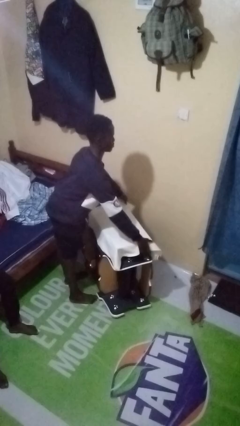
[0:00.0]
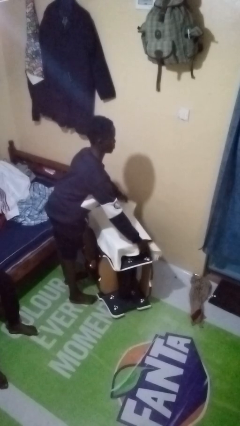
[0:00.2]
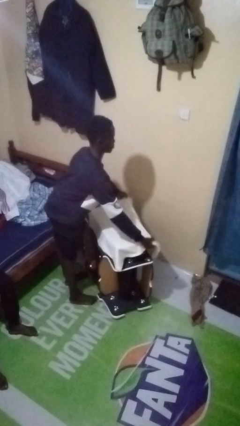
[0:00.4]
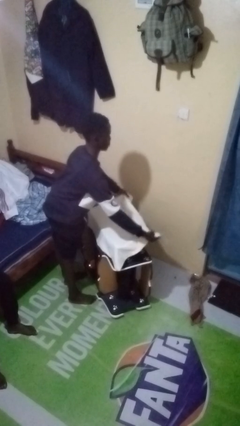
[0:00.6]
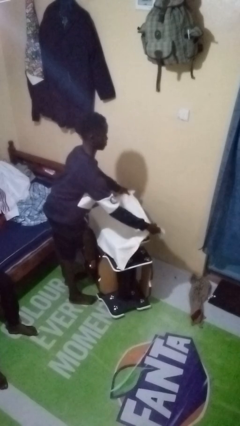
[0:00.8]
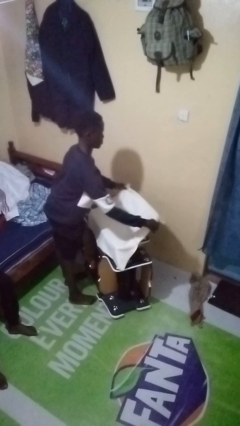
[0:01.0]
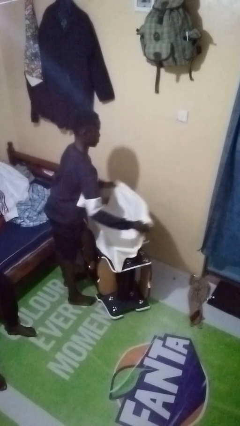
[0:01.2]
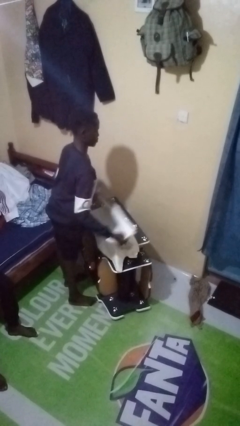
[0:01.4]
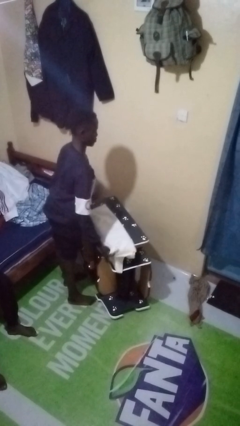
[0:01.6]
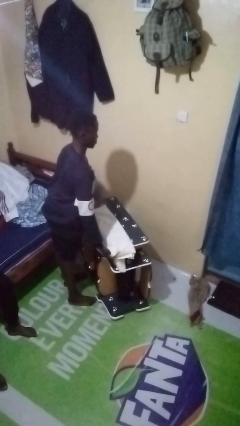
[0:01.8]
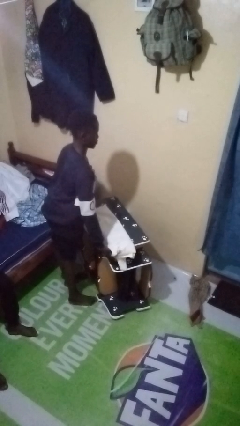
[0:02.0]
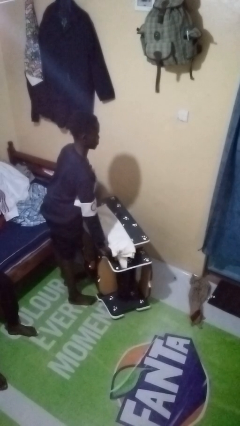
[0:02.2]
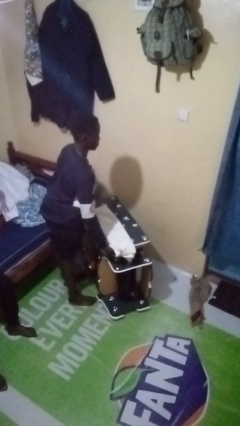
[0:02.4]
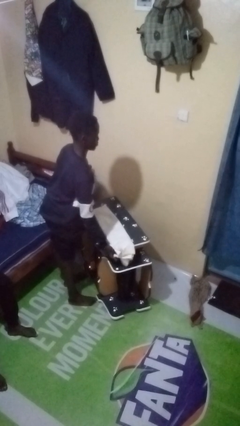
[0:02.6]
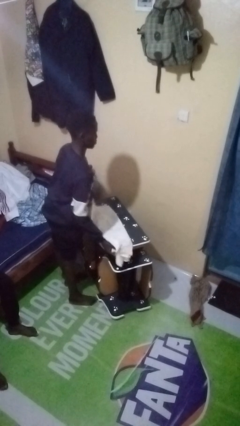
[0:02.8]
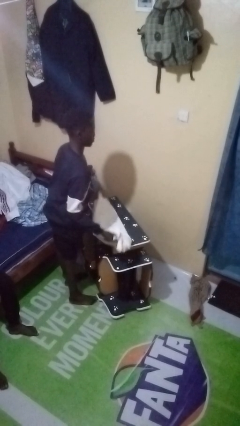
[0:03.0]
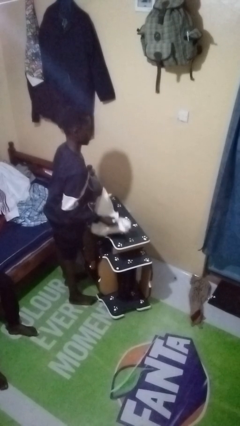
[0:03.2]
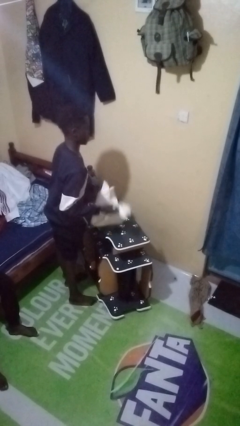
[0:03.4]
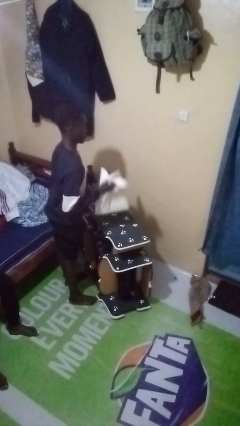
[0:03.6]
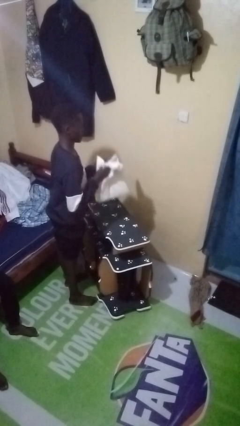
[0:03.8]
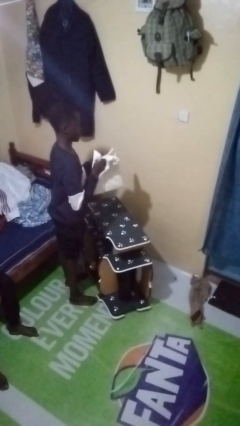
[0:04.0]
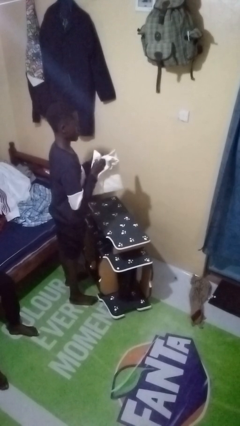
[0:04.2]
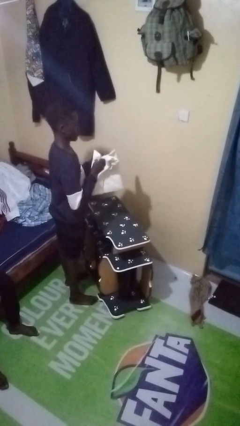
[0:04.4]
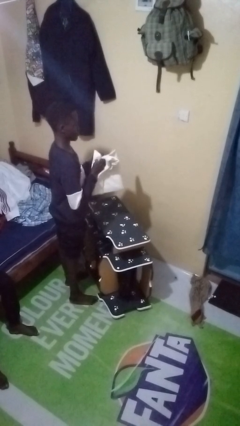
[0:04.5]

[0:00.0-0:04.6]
person folds tablecloth

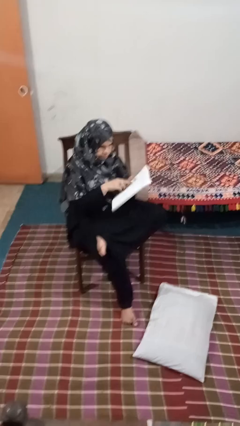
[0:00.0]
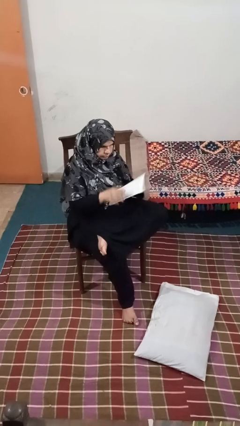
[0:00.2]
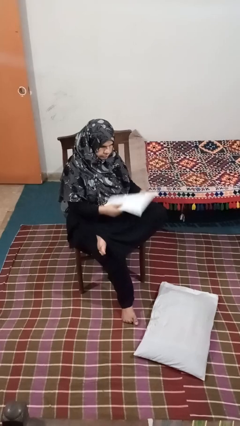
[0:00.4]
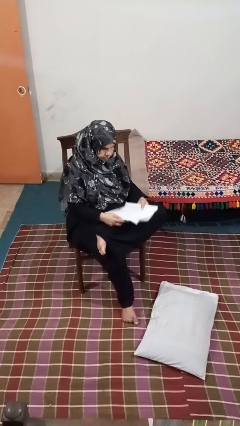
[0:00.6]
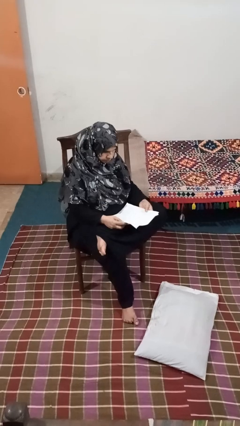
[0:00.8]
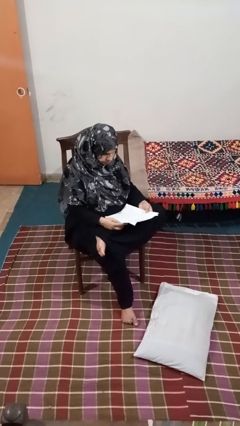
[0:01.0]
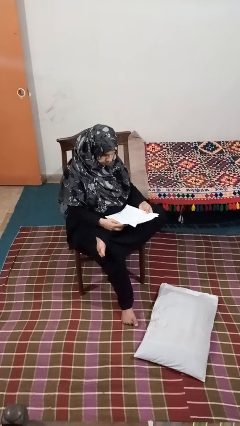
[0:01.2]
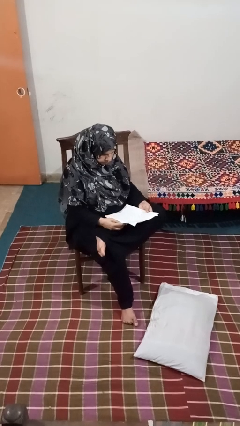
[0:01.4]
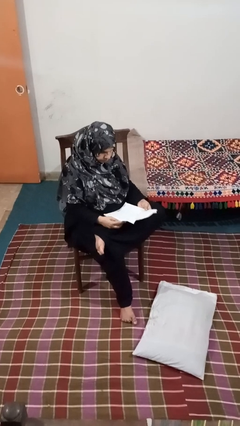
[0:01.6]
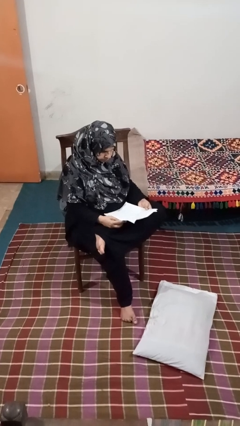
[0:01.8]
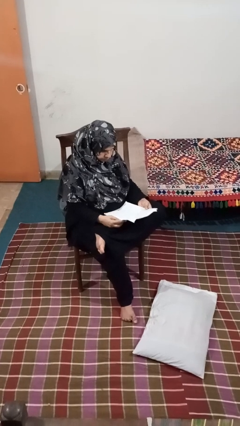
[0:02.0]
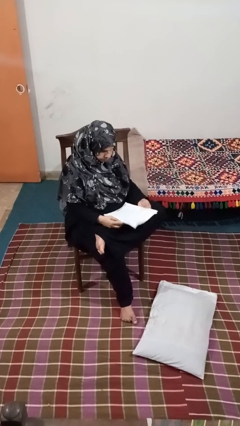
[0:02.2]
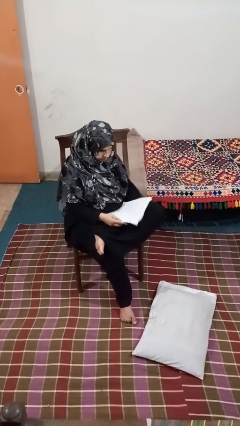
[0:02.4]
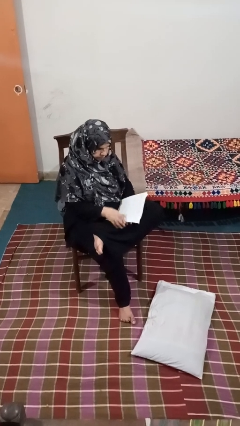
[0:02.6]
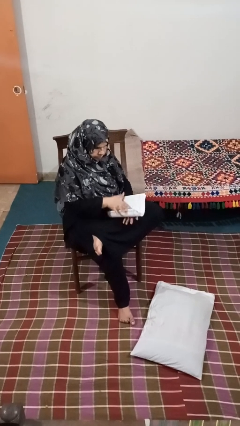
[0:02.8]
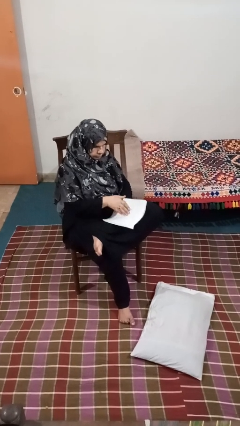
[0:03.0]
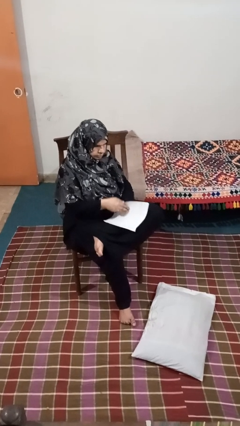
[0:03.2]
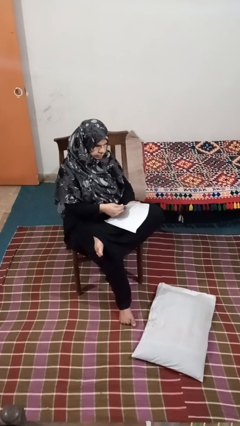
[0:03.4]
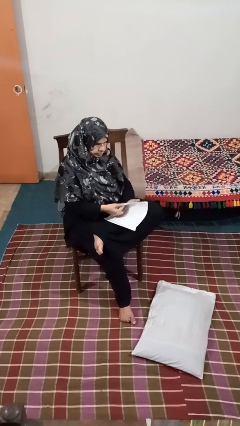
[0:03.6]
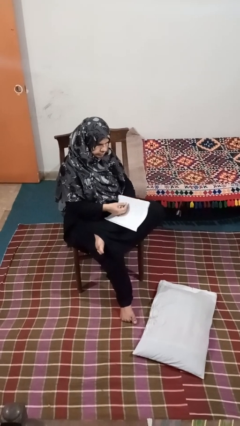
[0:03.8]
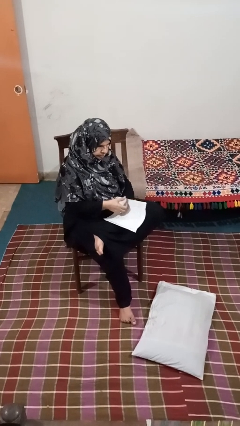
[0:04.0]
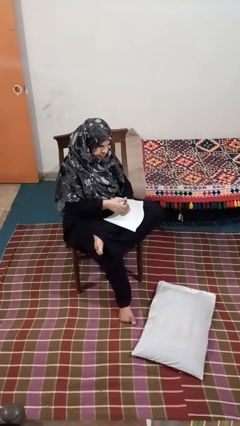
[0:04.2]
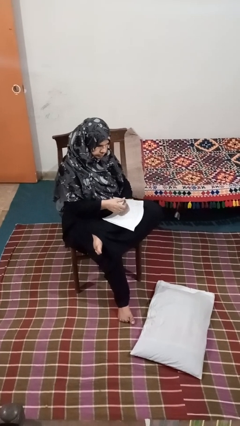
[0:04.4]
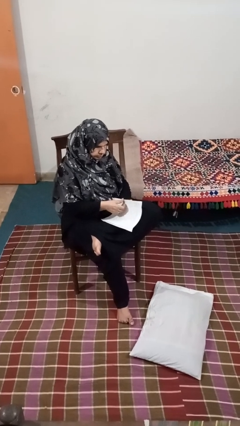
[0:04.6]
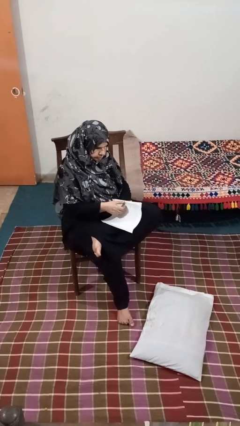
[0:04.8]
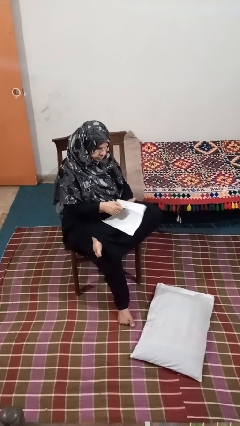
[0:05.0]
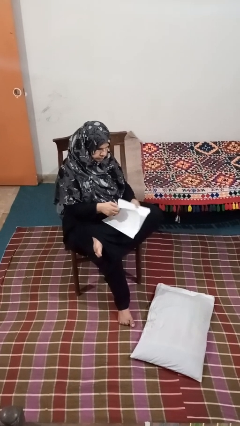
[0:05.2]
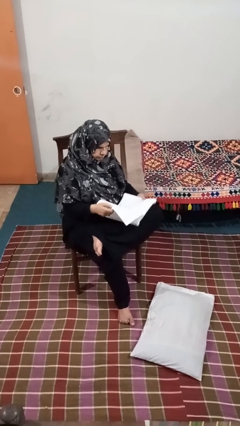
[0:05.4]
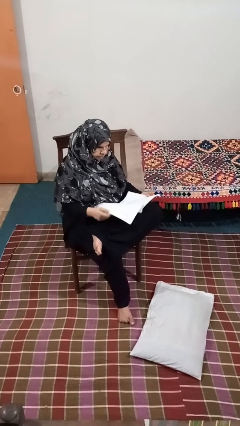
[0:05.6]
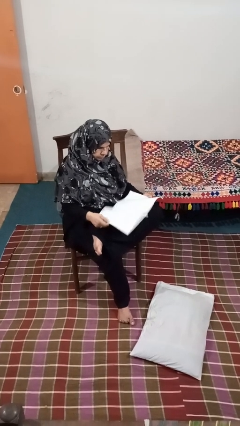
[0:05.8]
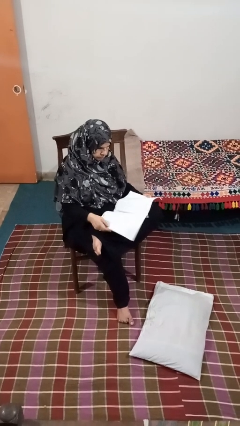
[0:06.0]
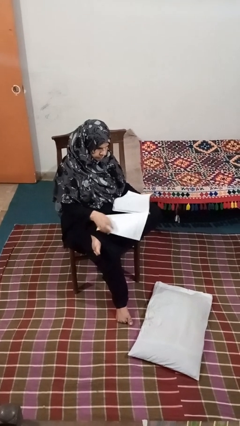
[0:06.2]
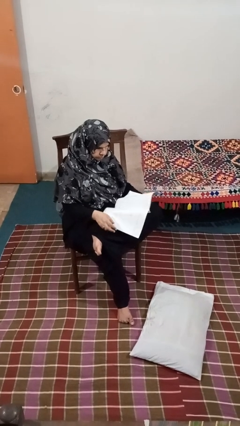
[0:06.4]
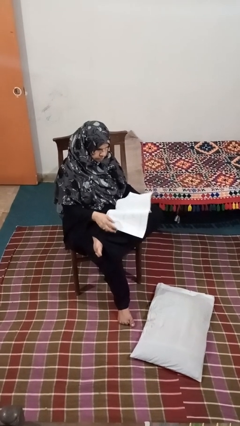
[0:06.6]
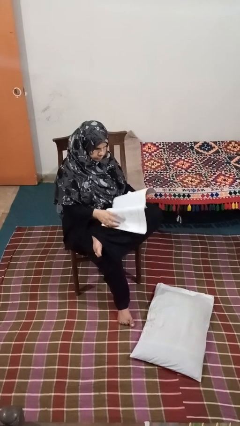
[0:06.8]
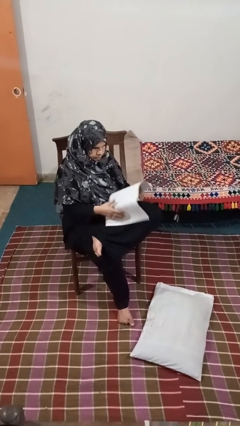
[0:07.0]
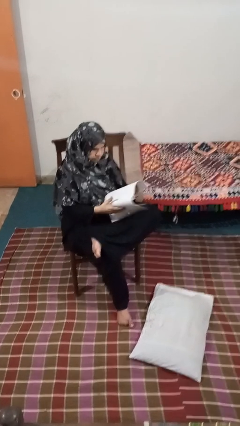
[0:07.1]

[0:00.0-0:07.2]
person reads newspaper

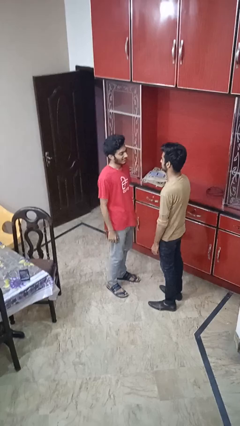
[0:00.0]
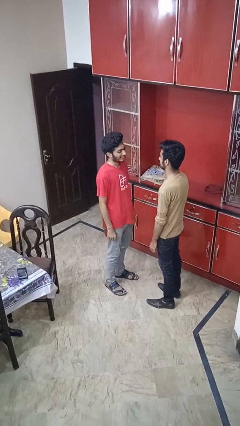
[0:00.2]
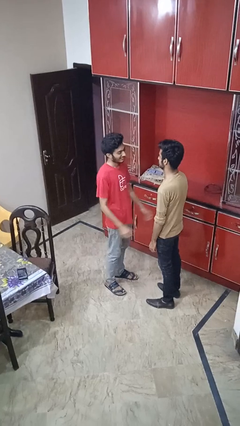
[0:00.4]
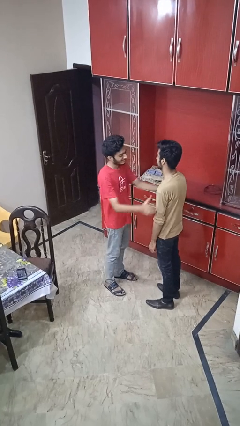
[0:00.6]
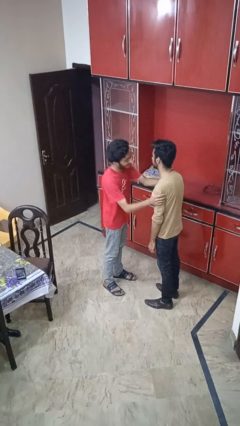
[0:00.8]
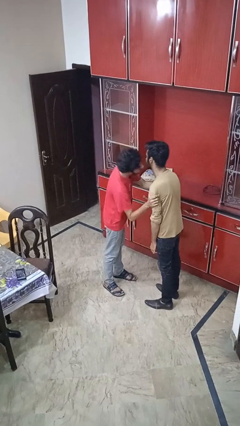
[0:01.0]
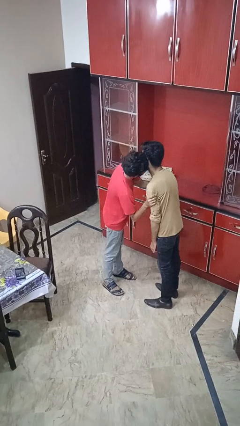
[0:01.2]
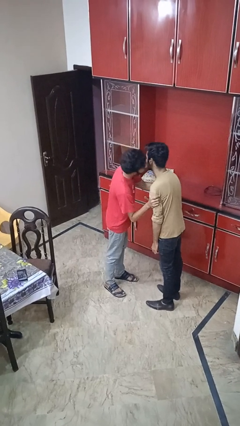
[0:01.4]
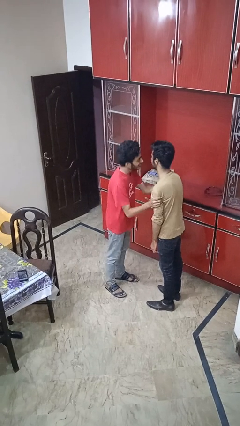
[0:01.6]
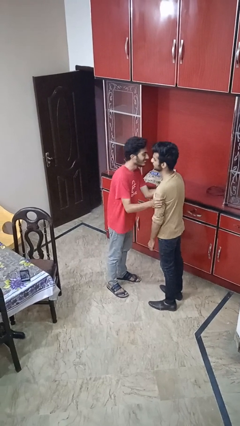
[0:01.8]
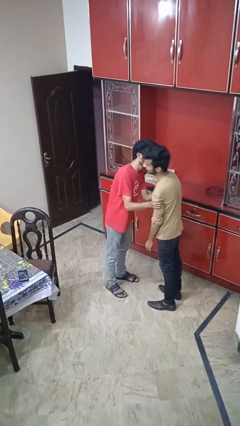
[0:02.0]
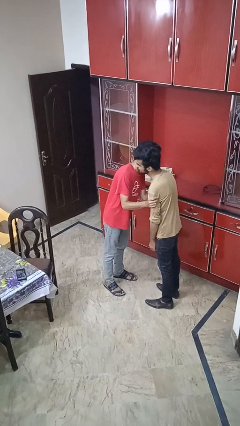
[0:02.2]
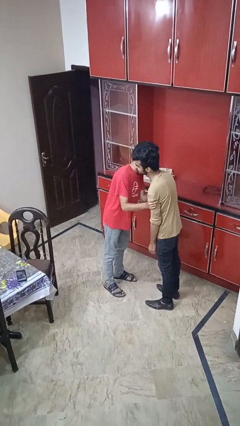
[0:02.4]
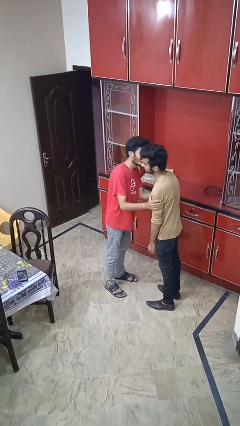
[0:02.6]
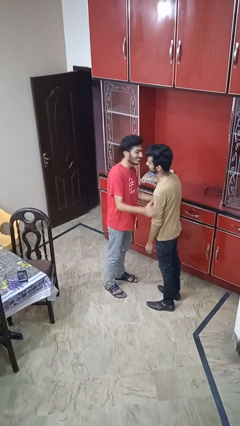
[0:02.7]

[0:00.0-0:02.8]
person kisses cheek of person

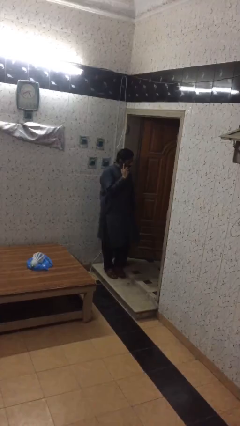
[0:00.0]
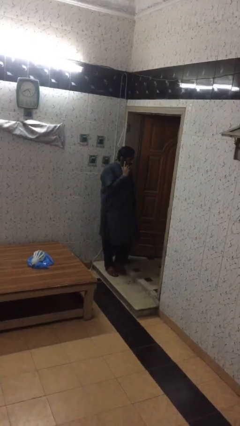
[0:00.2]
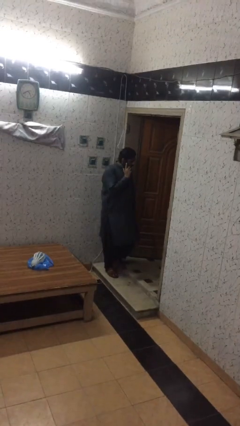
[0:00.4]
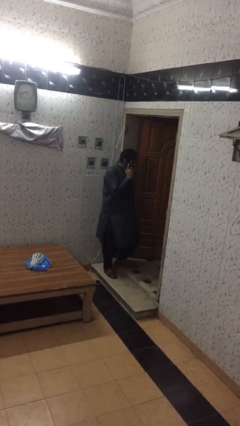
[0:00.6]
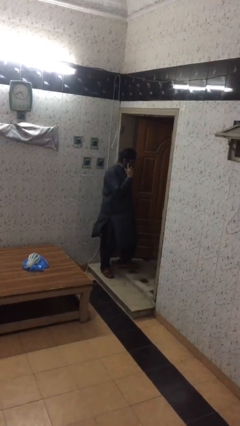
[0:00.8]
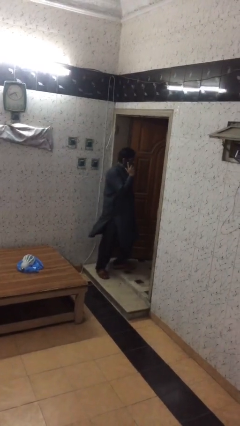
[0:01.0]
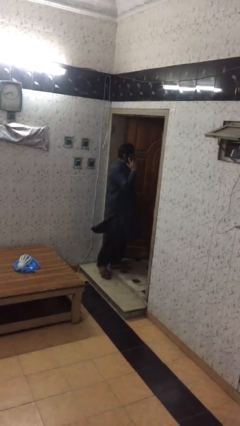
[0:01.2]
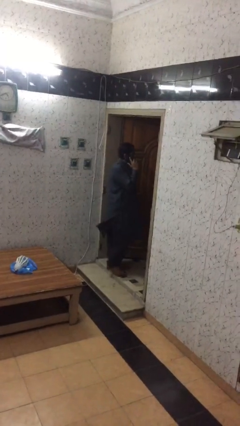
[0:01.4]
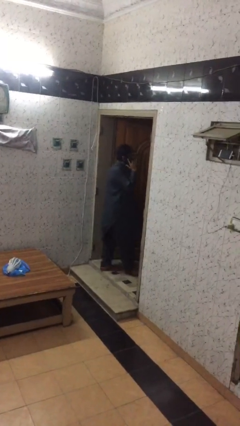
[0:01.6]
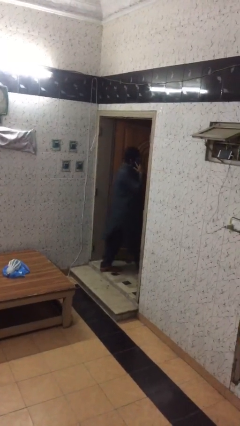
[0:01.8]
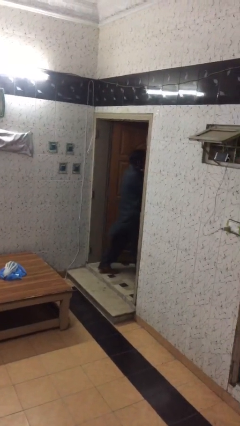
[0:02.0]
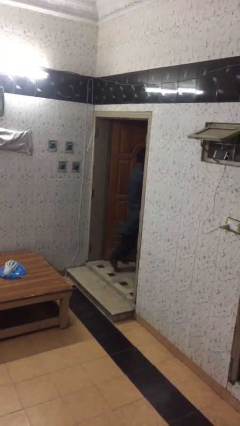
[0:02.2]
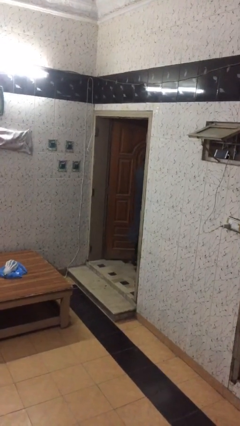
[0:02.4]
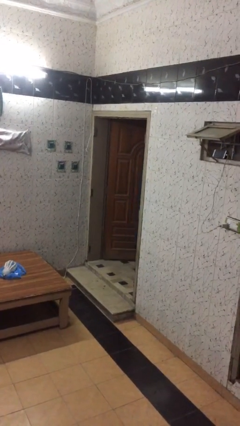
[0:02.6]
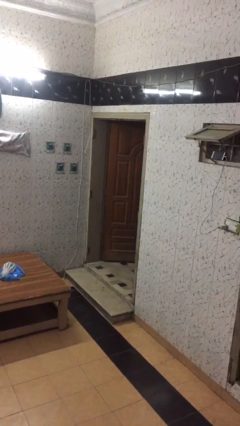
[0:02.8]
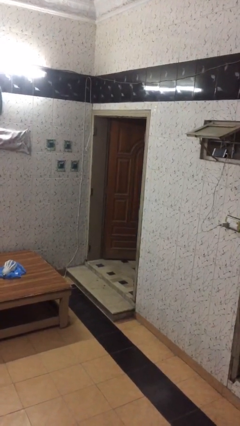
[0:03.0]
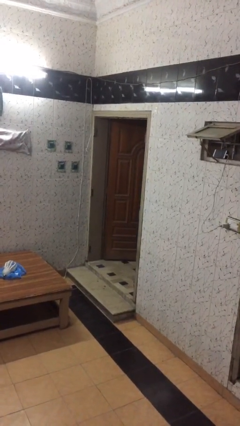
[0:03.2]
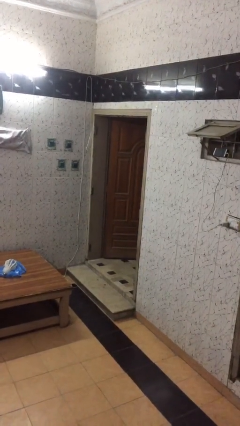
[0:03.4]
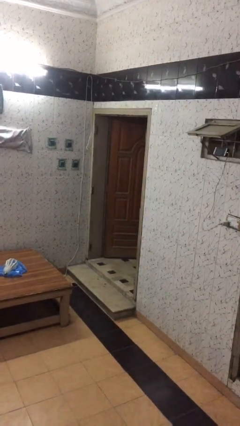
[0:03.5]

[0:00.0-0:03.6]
person exits scene through structure
